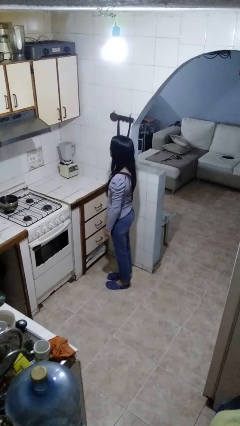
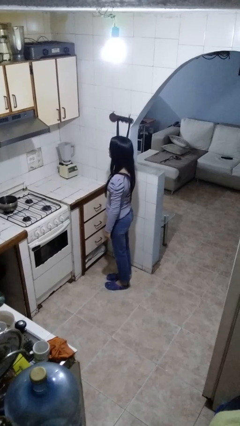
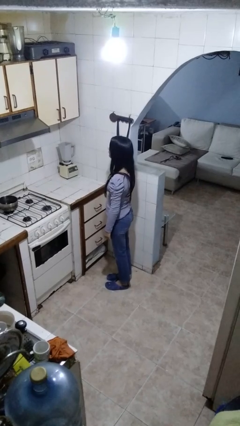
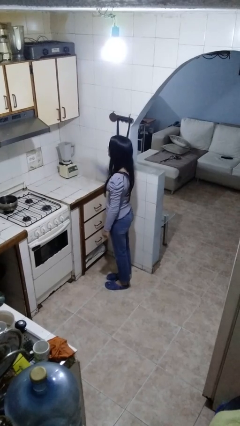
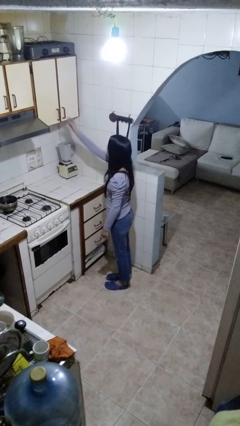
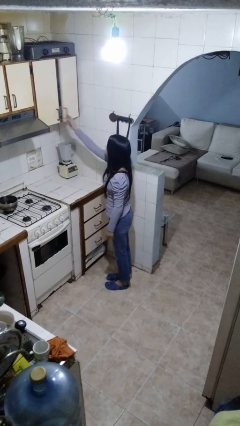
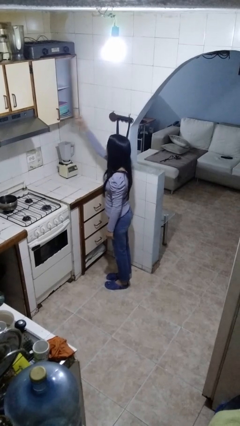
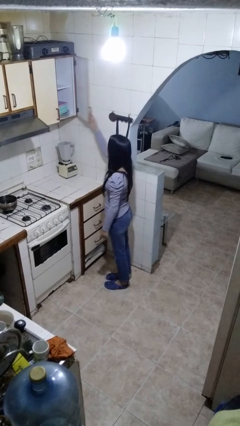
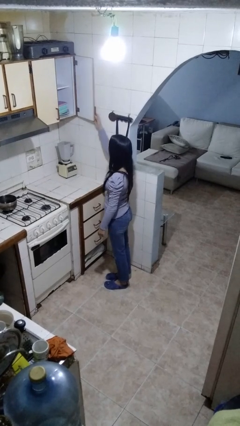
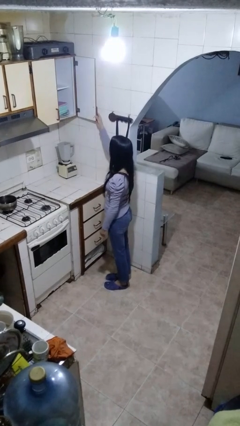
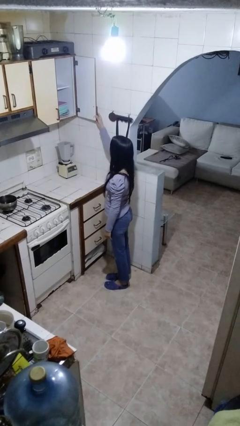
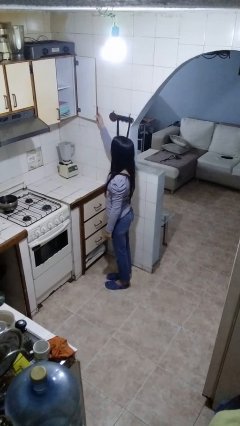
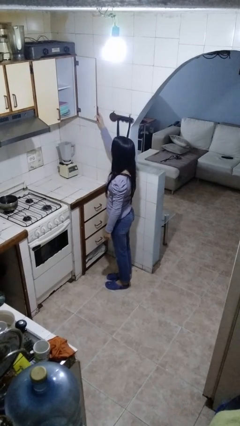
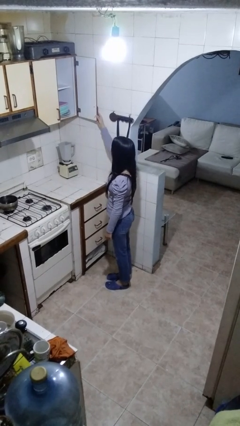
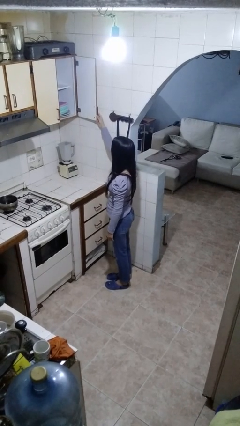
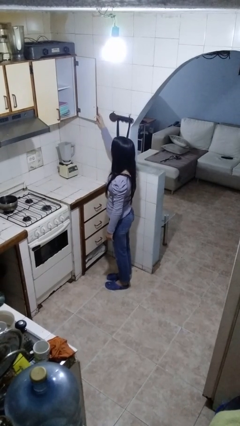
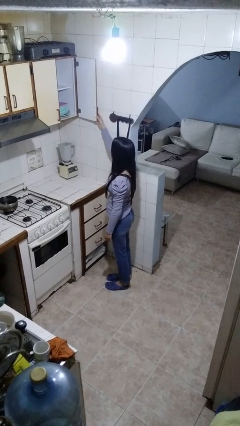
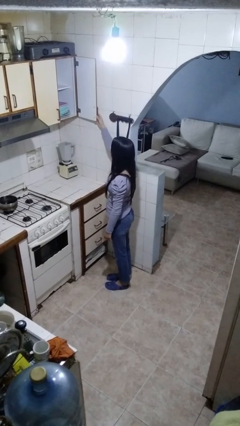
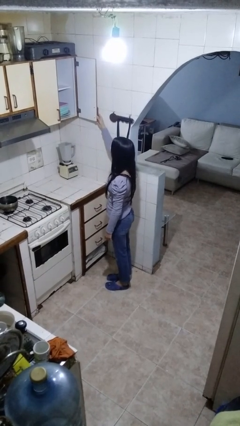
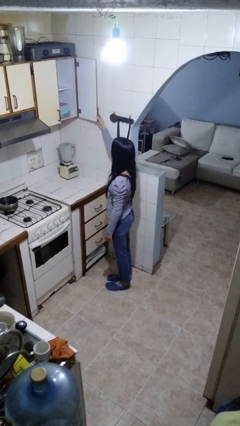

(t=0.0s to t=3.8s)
person opens cabinet

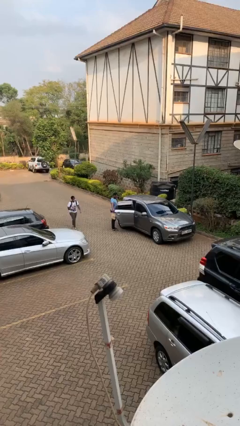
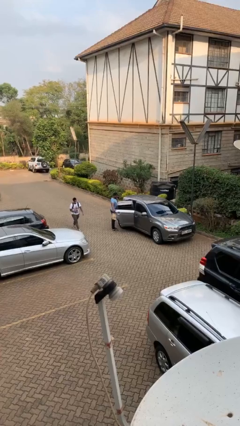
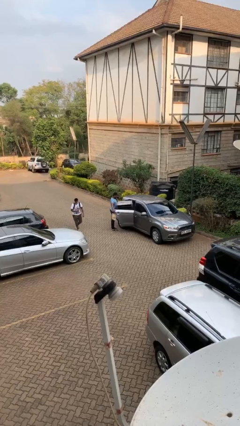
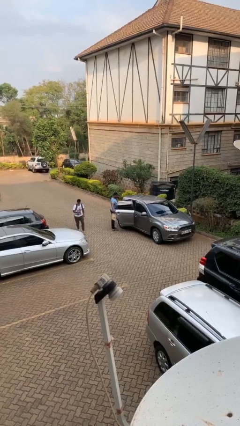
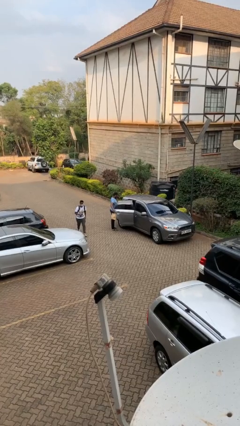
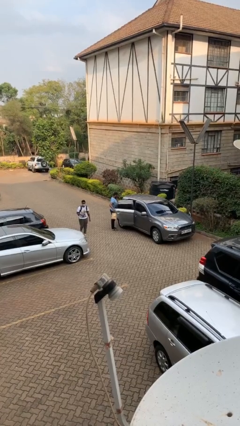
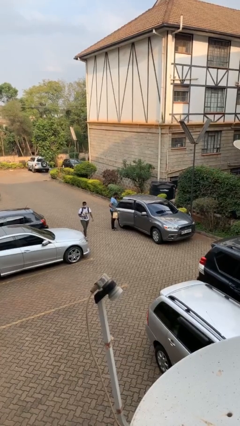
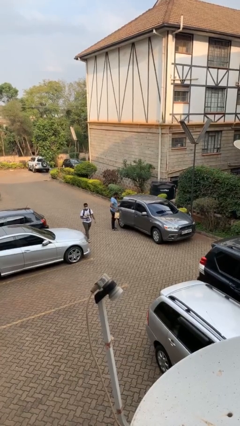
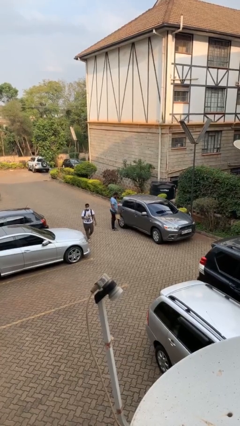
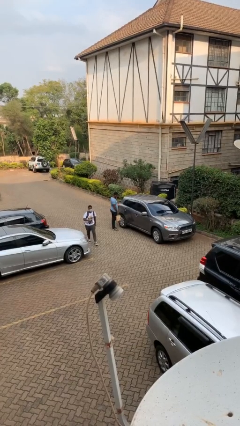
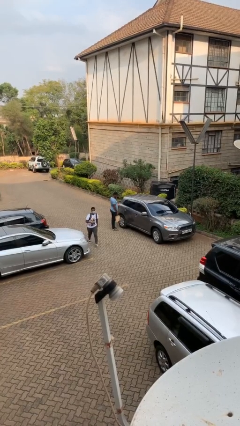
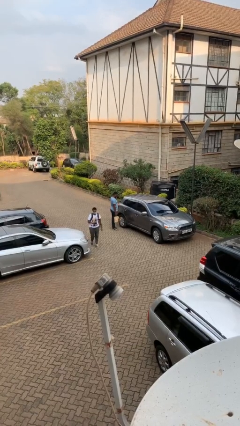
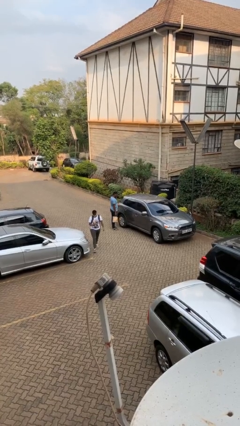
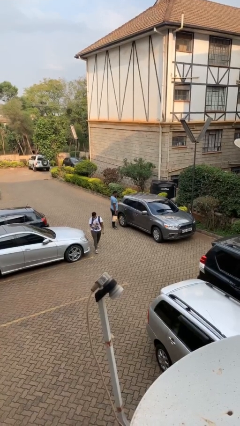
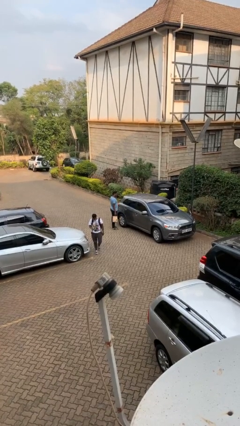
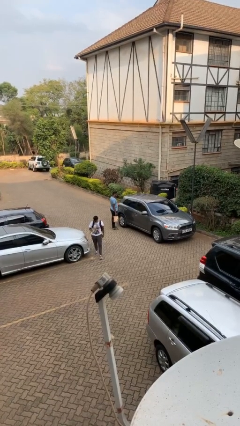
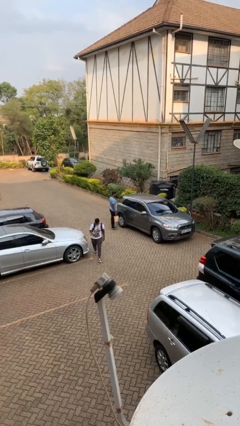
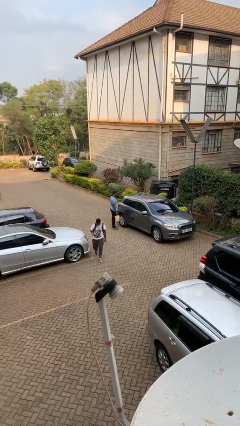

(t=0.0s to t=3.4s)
person closes car door

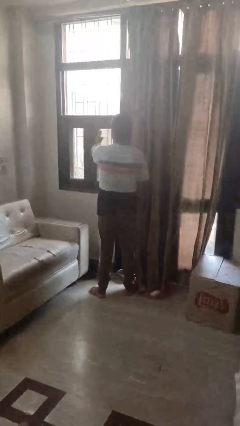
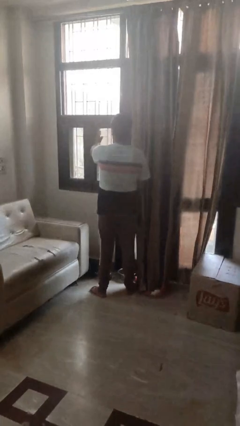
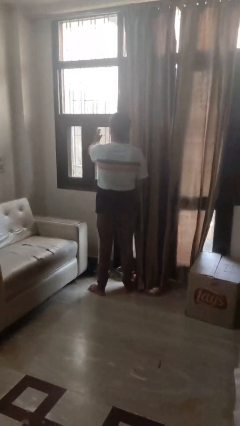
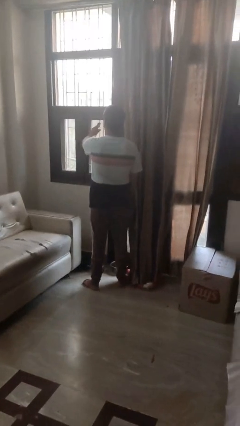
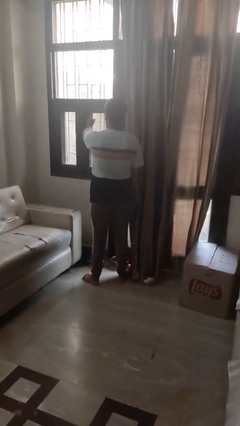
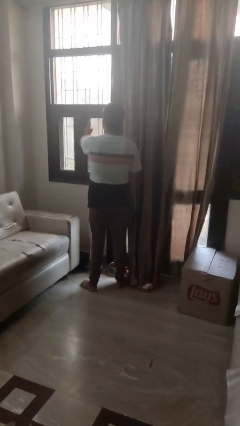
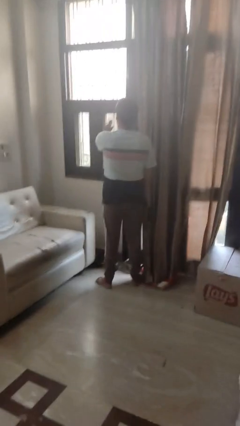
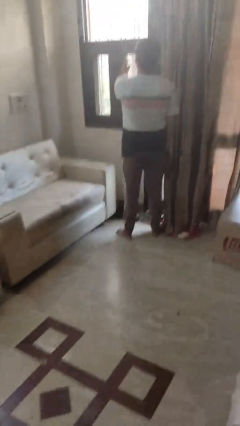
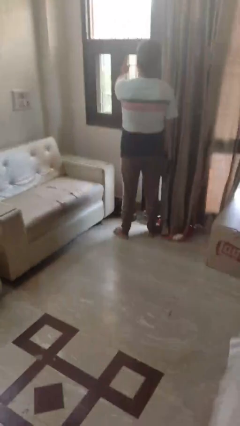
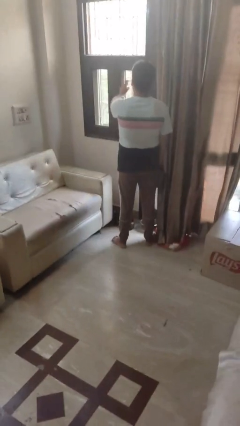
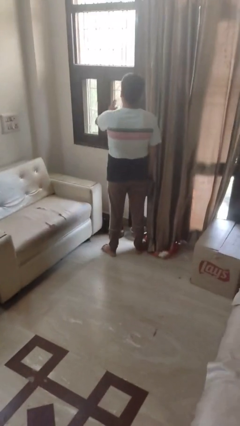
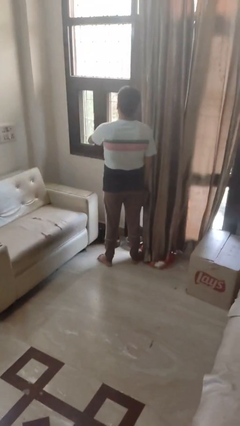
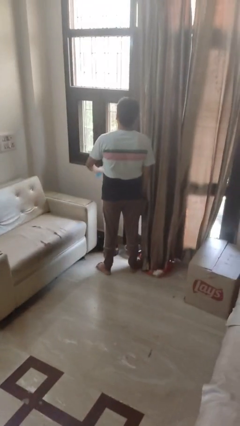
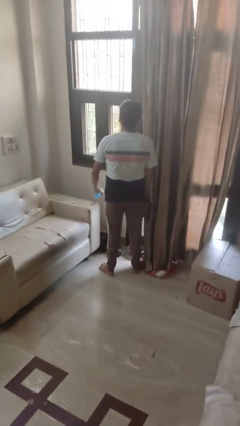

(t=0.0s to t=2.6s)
person sprays from bottle

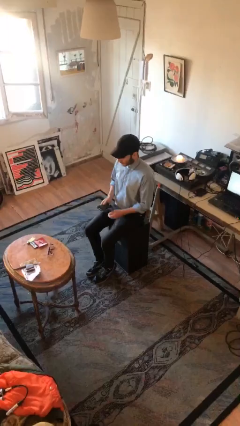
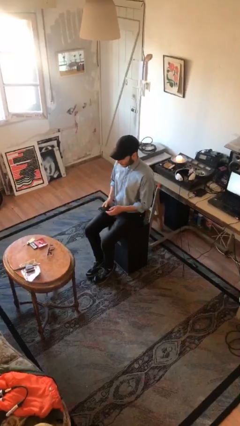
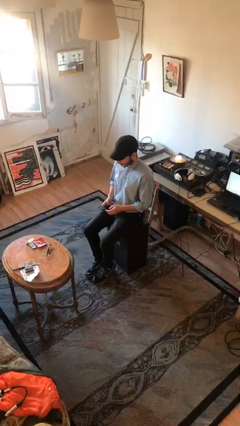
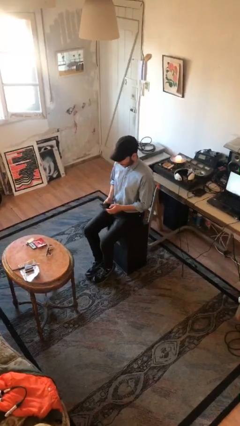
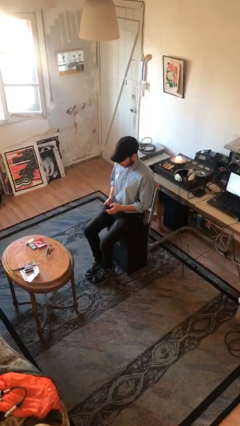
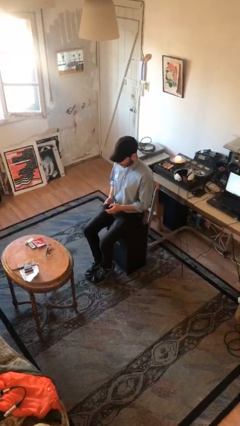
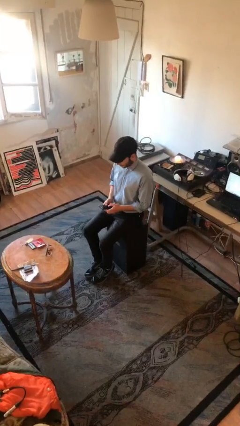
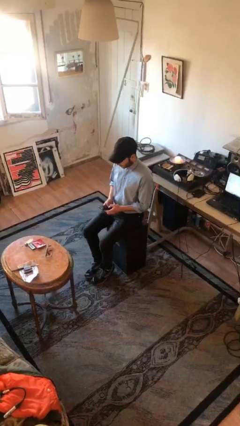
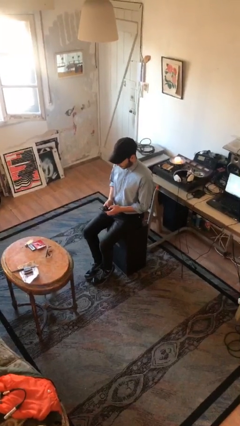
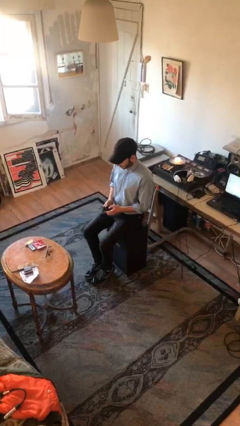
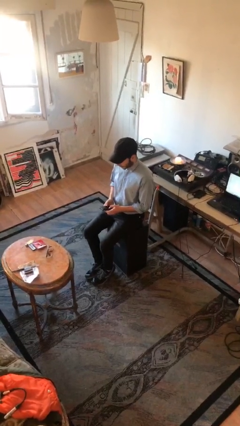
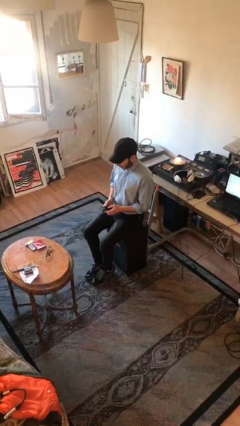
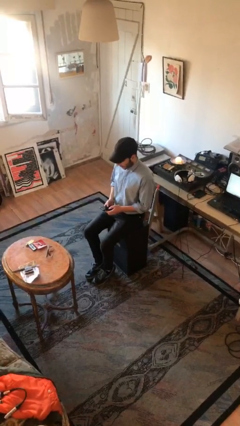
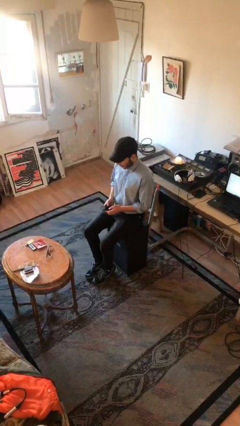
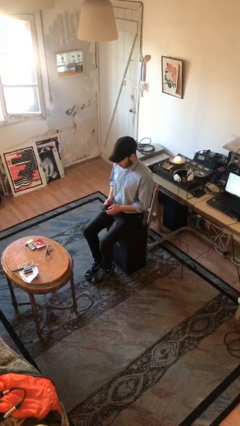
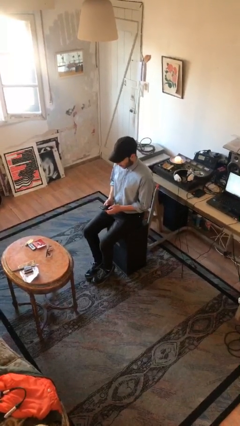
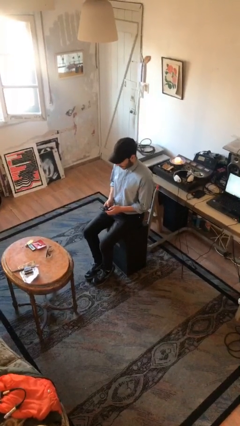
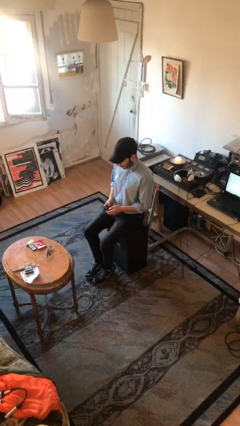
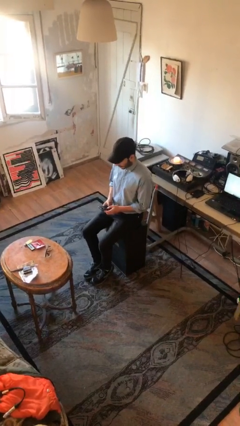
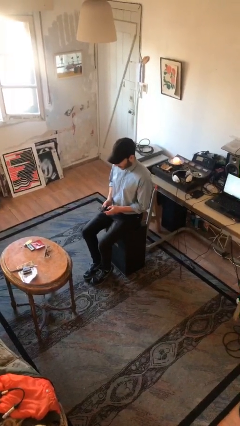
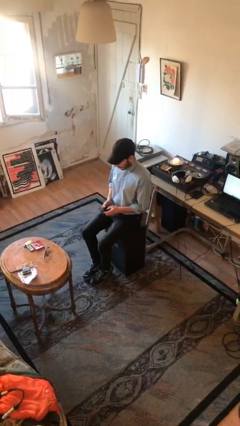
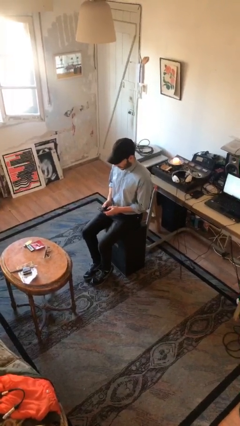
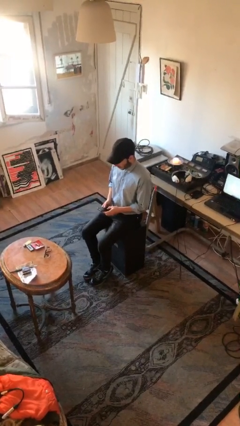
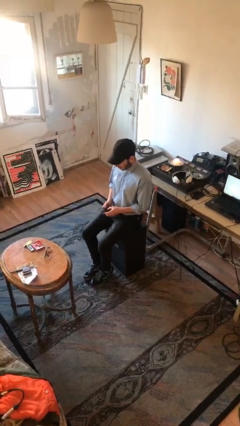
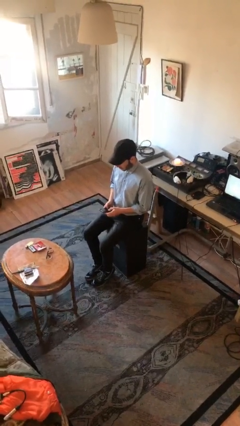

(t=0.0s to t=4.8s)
person texts on phone

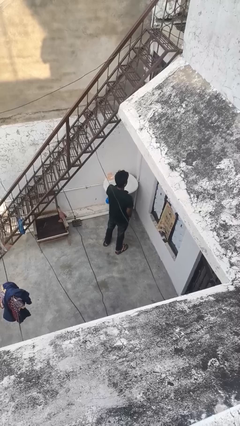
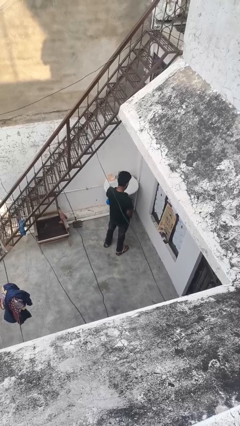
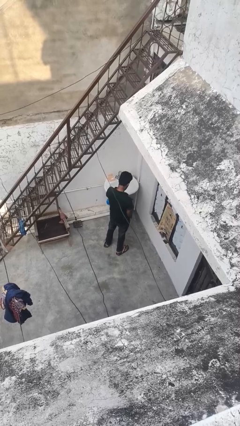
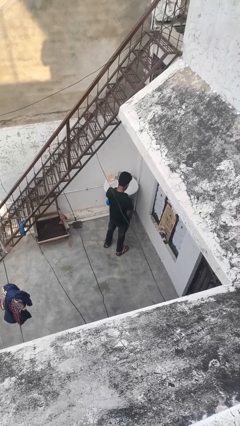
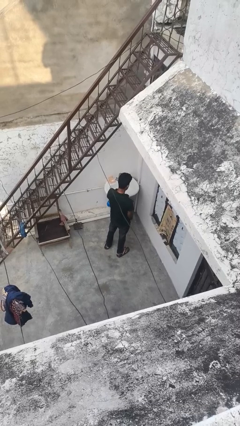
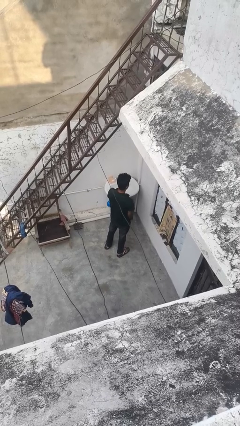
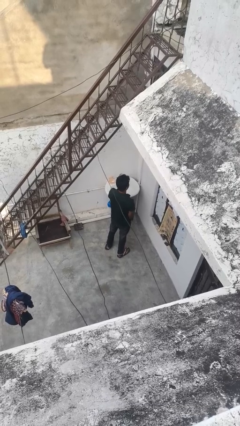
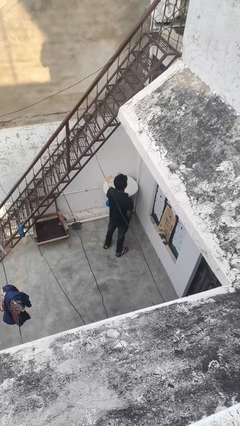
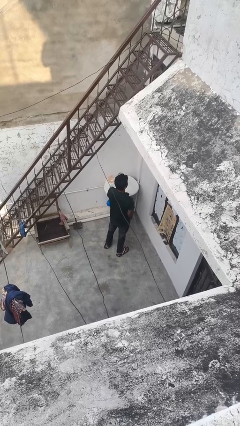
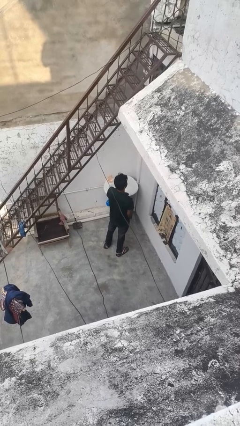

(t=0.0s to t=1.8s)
person strokes chin

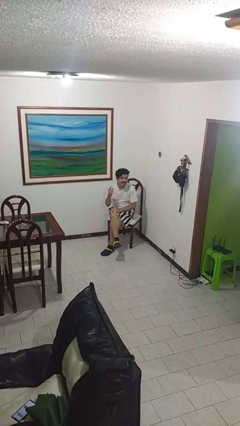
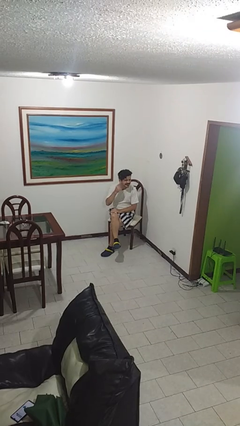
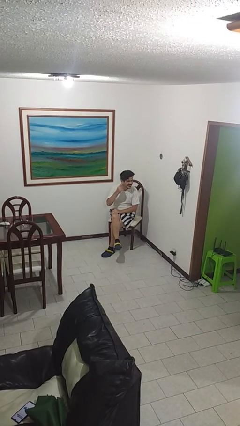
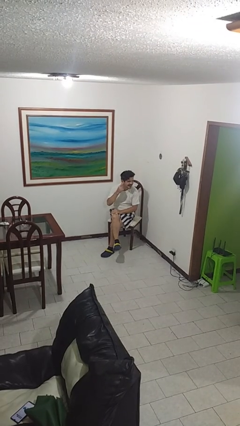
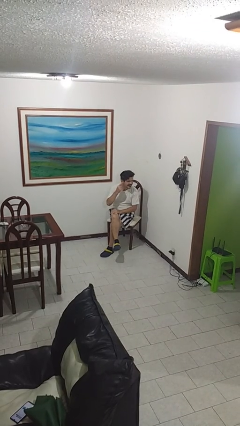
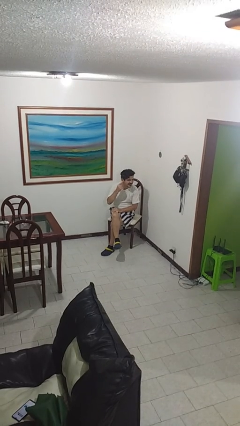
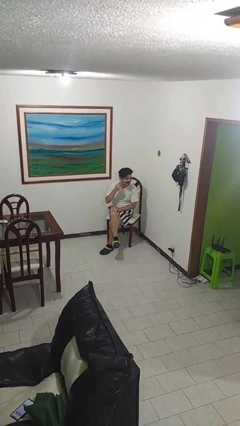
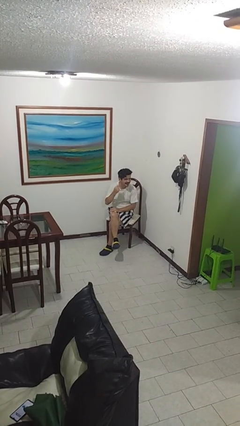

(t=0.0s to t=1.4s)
person gestures listen closely
